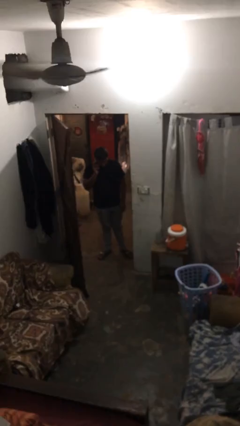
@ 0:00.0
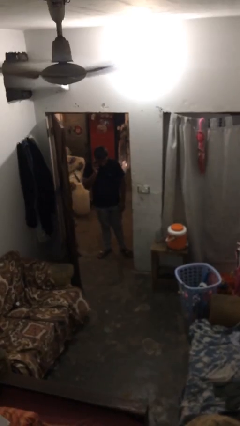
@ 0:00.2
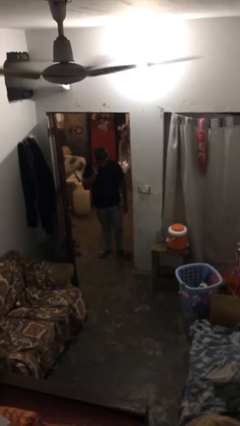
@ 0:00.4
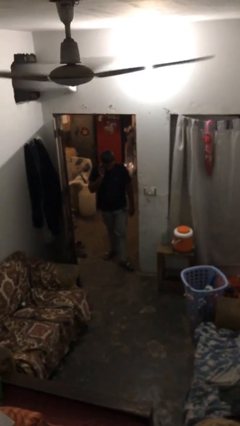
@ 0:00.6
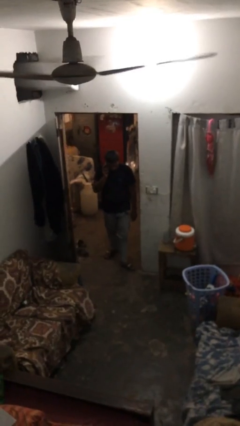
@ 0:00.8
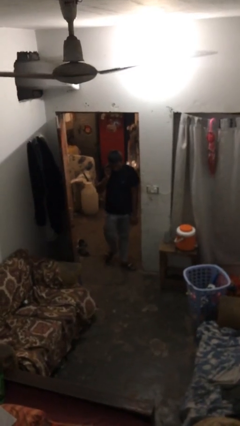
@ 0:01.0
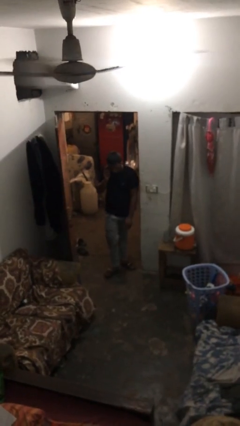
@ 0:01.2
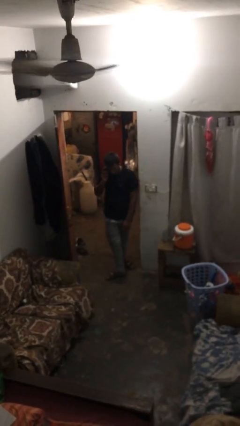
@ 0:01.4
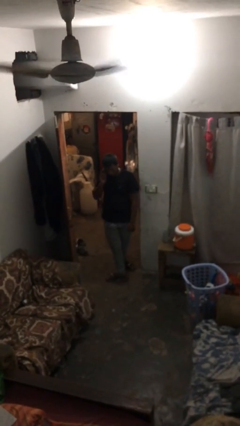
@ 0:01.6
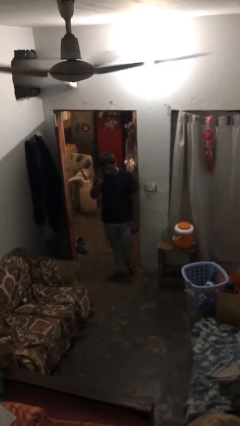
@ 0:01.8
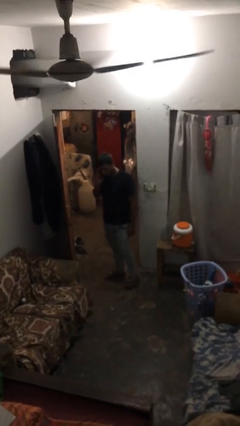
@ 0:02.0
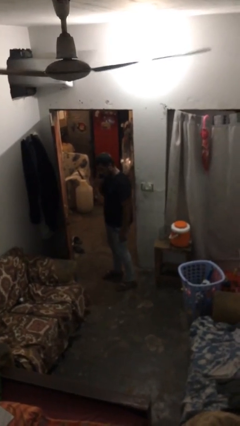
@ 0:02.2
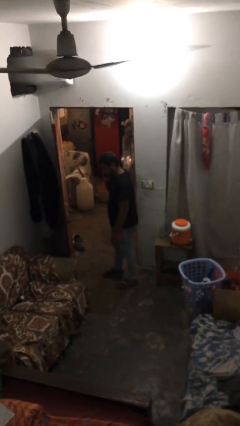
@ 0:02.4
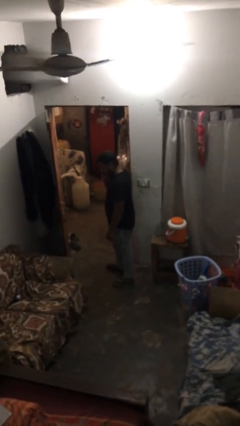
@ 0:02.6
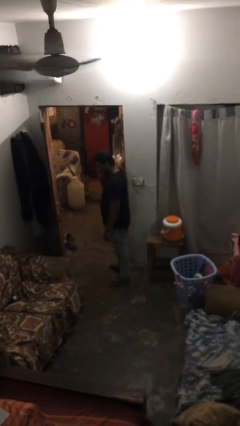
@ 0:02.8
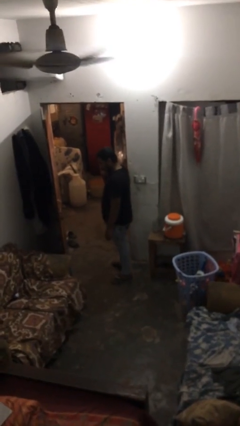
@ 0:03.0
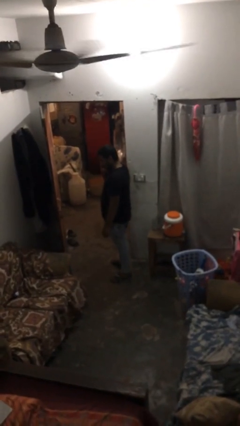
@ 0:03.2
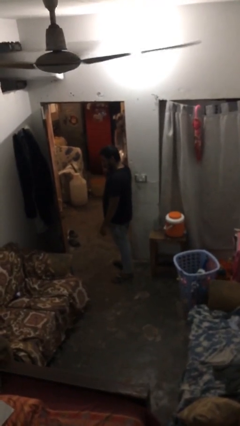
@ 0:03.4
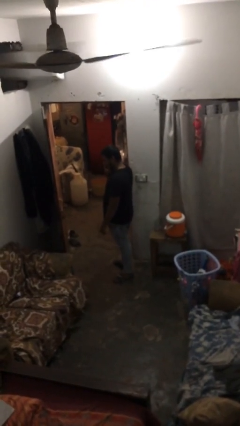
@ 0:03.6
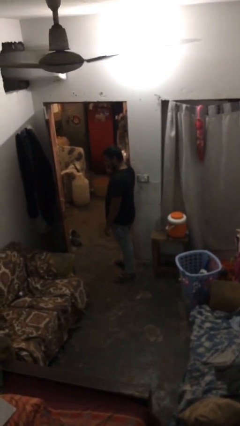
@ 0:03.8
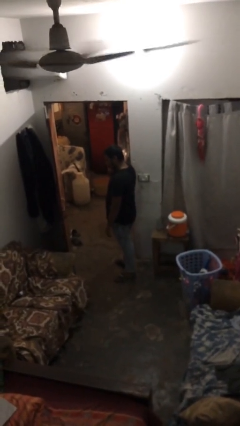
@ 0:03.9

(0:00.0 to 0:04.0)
person enters scene through structure

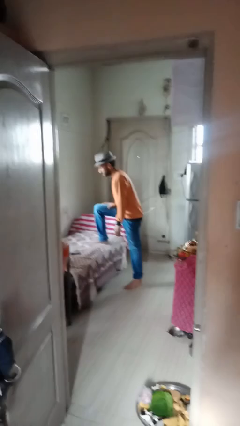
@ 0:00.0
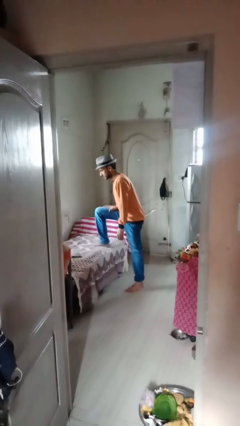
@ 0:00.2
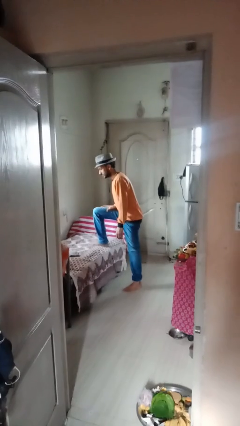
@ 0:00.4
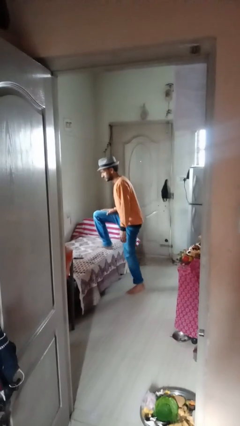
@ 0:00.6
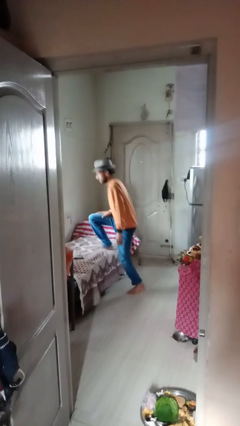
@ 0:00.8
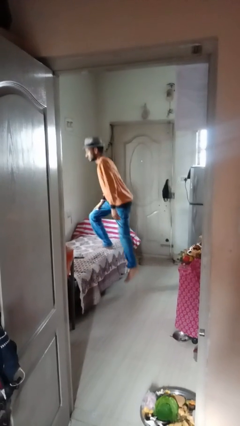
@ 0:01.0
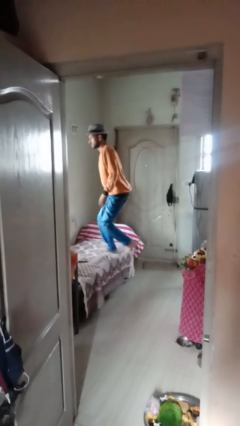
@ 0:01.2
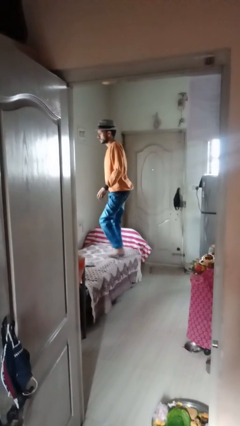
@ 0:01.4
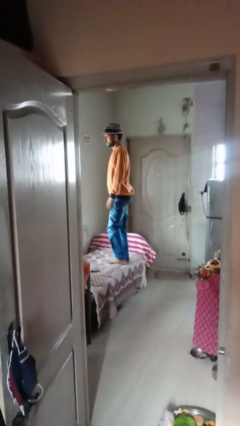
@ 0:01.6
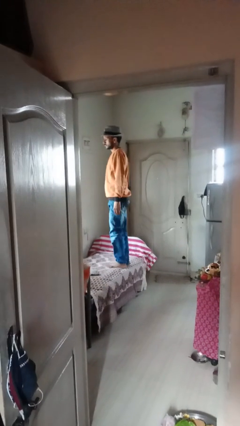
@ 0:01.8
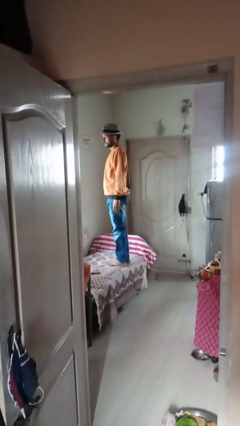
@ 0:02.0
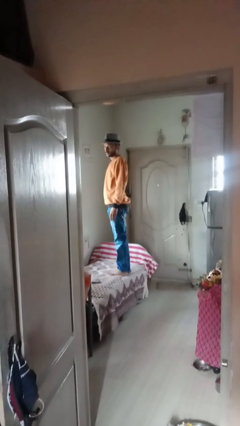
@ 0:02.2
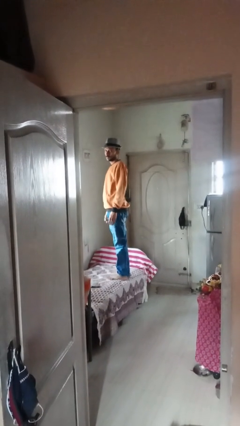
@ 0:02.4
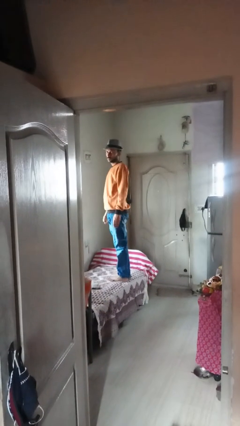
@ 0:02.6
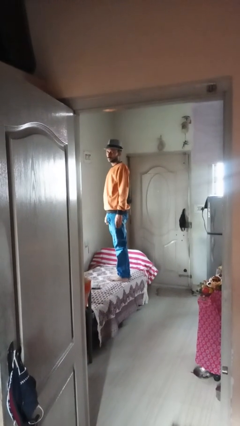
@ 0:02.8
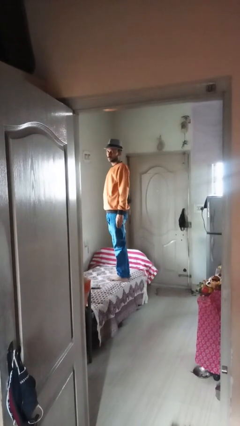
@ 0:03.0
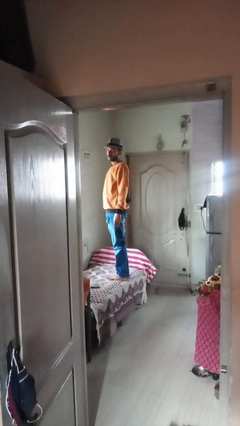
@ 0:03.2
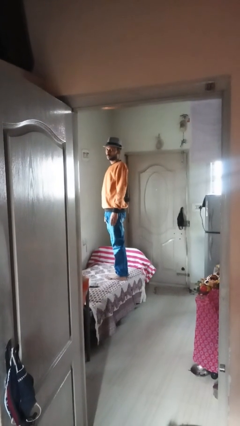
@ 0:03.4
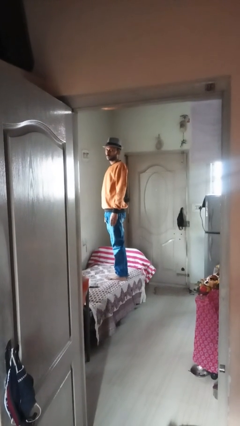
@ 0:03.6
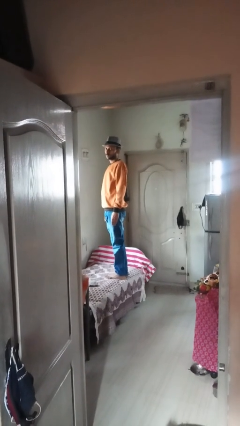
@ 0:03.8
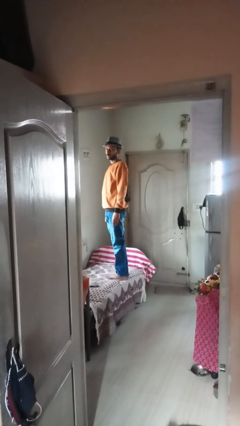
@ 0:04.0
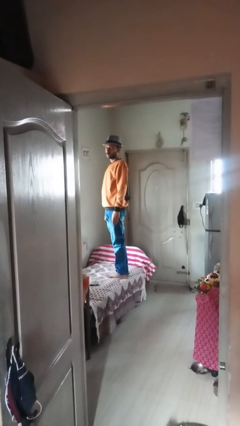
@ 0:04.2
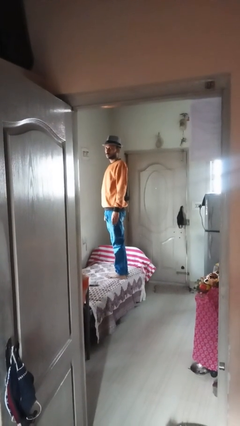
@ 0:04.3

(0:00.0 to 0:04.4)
person climbs on couch

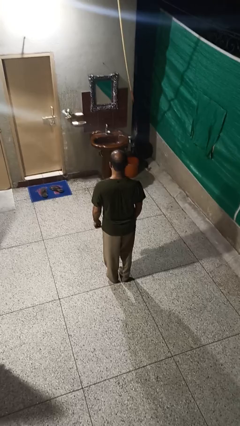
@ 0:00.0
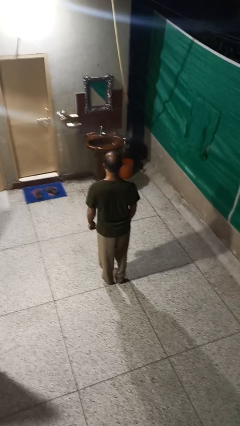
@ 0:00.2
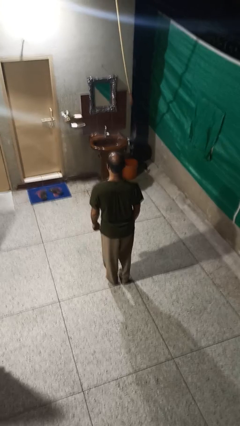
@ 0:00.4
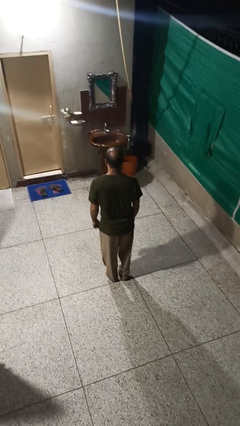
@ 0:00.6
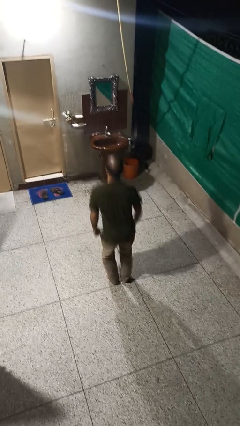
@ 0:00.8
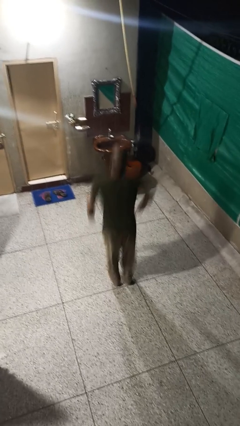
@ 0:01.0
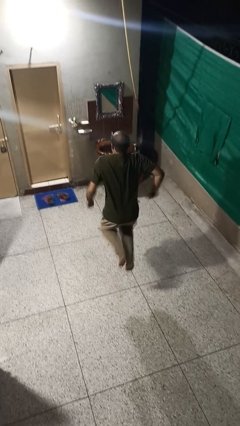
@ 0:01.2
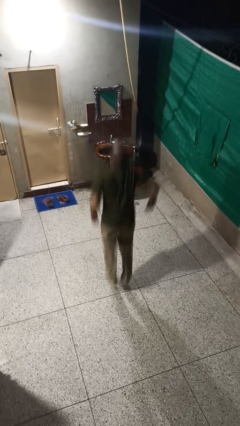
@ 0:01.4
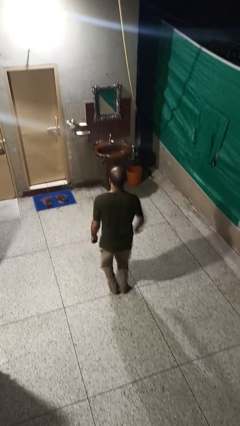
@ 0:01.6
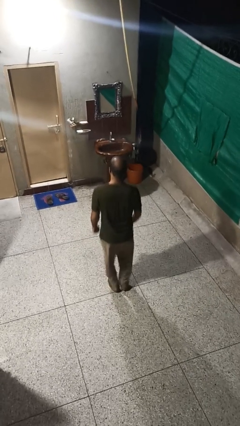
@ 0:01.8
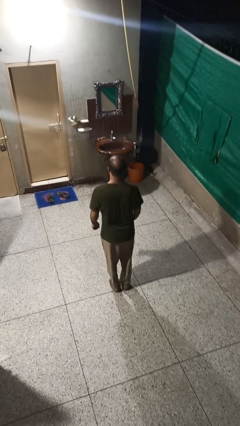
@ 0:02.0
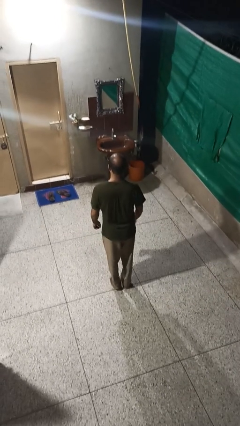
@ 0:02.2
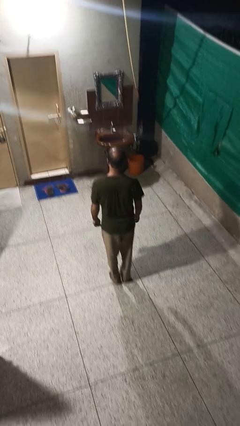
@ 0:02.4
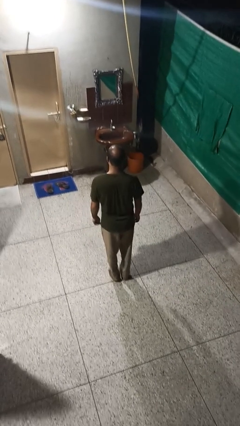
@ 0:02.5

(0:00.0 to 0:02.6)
person jumps

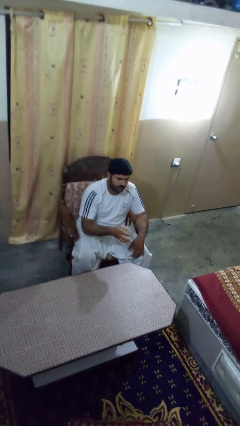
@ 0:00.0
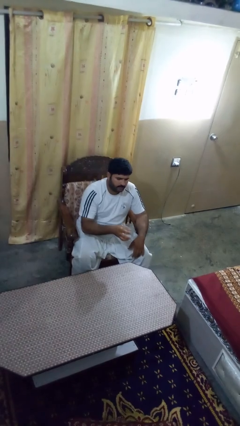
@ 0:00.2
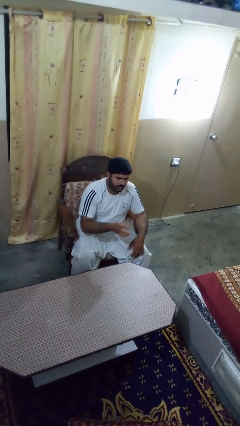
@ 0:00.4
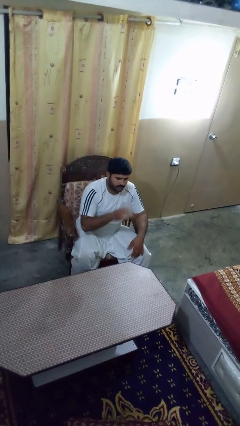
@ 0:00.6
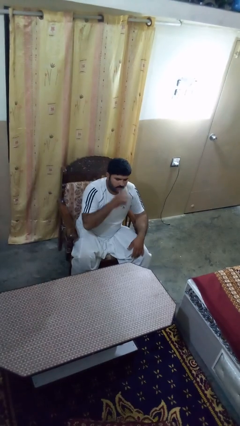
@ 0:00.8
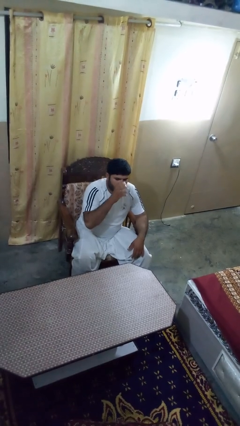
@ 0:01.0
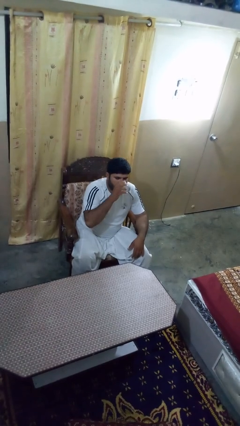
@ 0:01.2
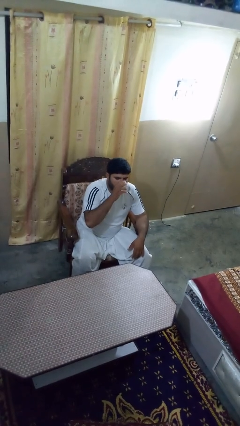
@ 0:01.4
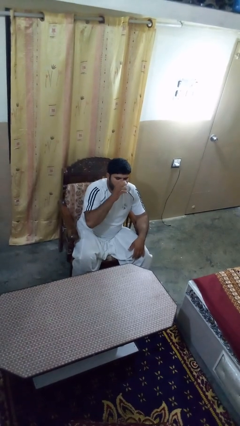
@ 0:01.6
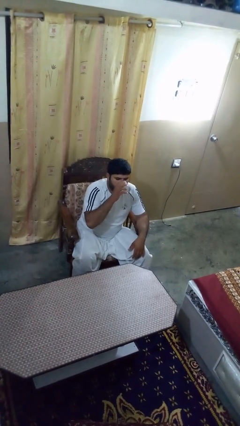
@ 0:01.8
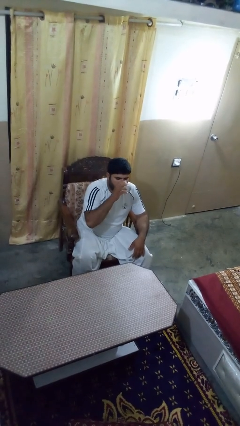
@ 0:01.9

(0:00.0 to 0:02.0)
person drinks from shotglass

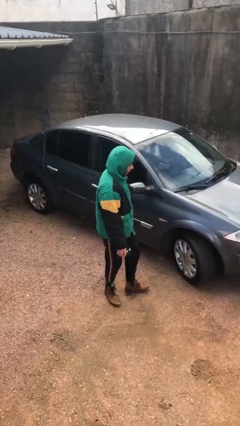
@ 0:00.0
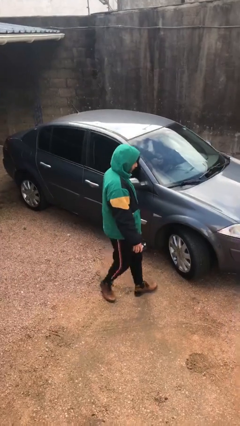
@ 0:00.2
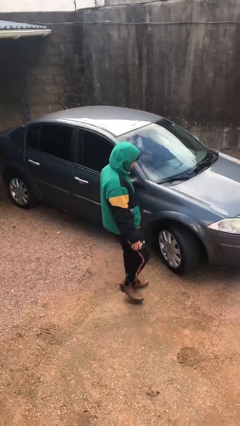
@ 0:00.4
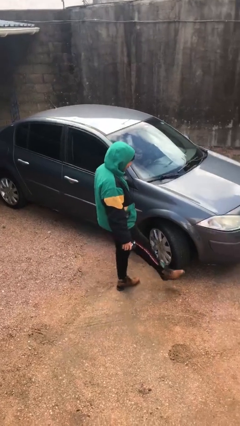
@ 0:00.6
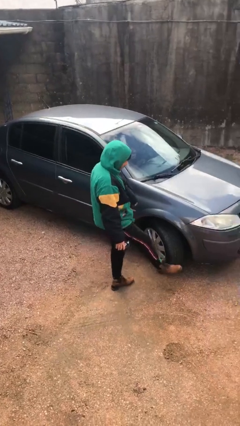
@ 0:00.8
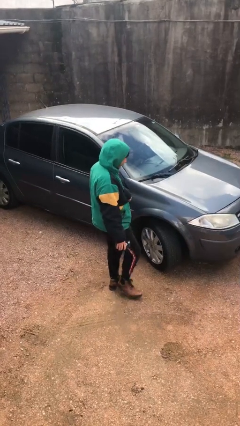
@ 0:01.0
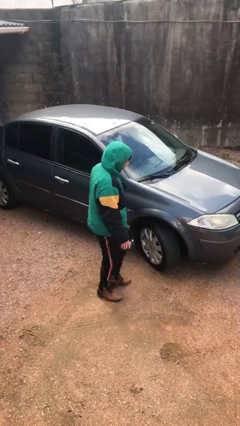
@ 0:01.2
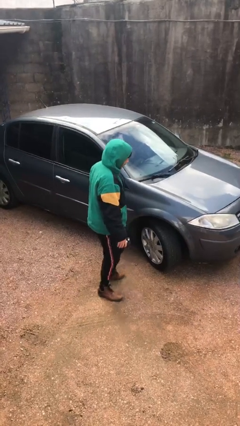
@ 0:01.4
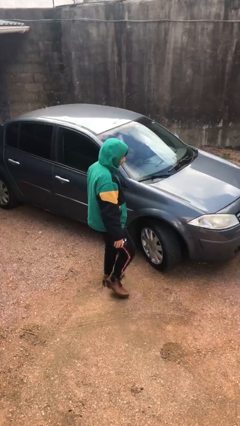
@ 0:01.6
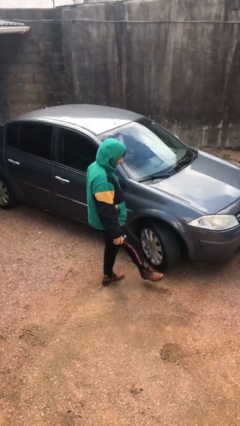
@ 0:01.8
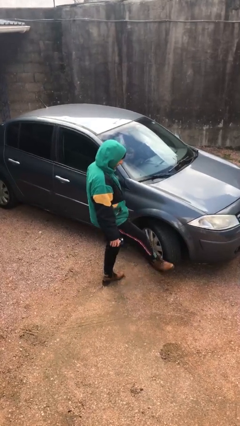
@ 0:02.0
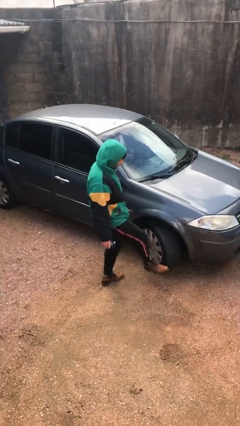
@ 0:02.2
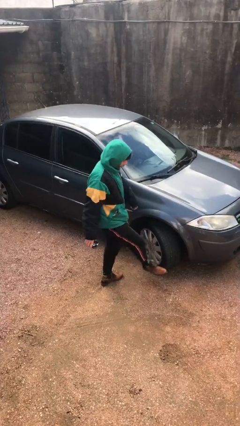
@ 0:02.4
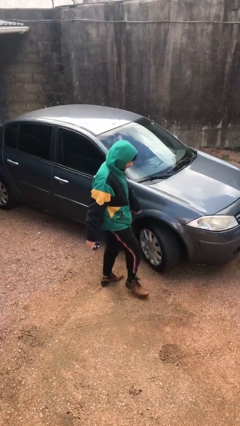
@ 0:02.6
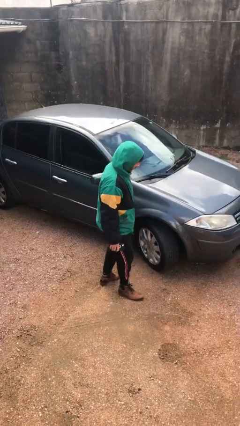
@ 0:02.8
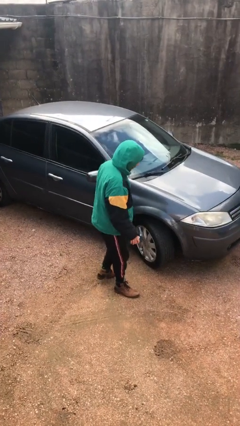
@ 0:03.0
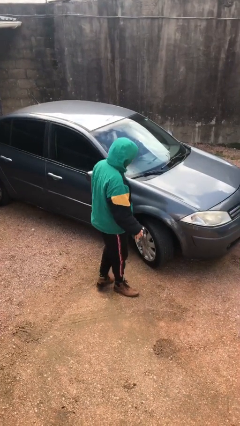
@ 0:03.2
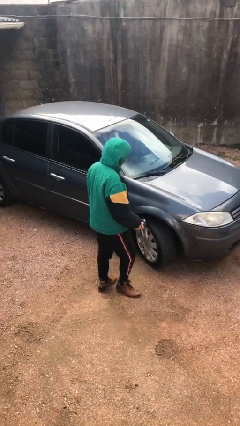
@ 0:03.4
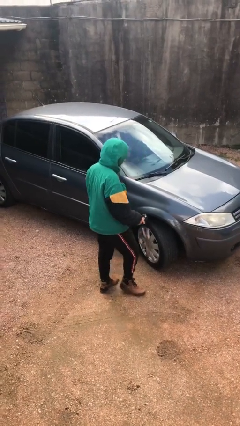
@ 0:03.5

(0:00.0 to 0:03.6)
person kicks car tires

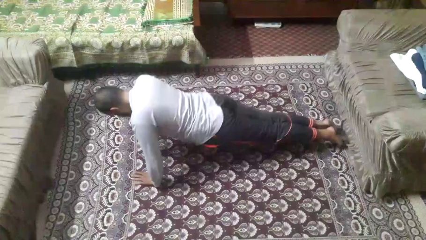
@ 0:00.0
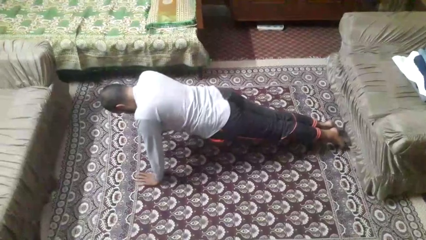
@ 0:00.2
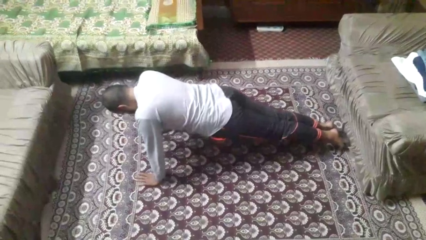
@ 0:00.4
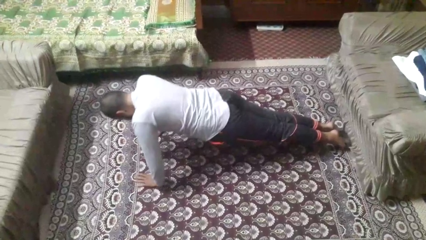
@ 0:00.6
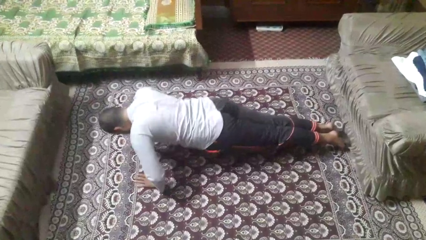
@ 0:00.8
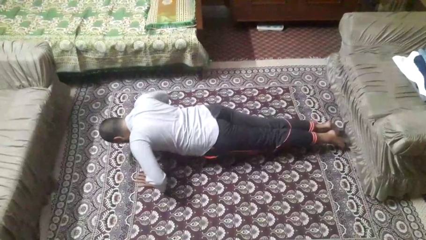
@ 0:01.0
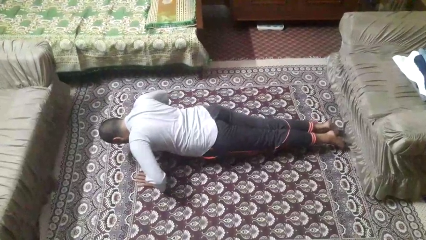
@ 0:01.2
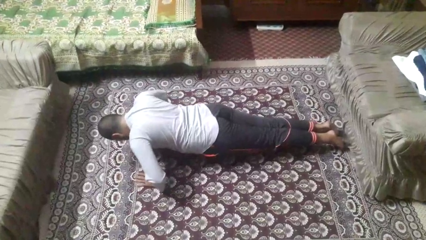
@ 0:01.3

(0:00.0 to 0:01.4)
person exercises with pushup
